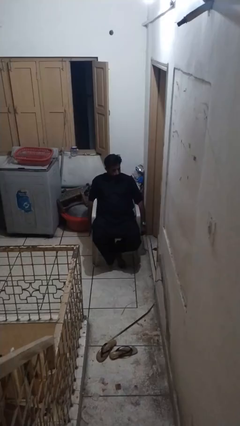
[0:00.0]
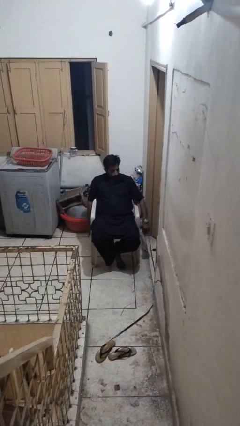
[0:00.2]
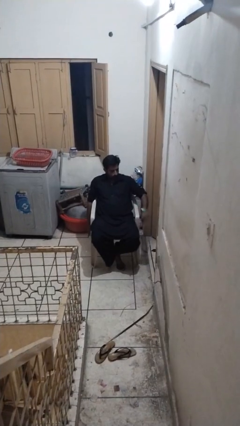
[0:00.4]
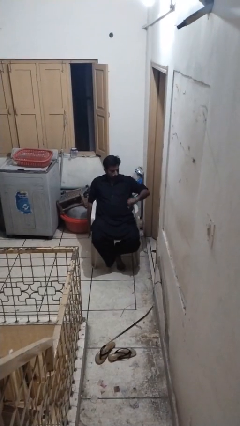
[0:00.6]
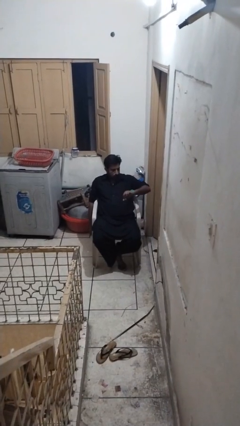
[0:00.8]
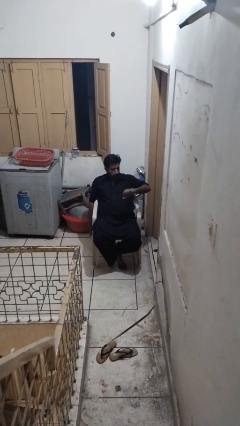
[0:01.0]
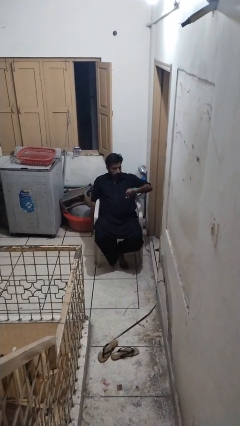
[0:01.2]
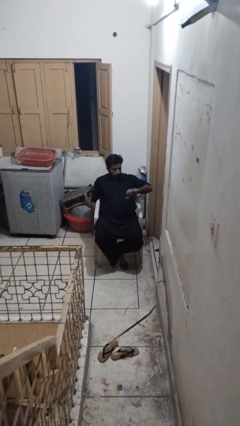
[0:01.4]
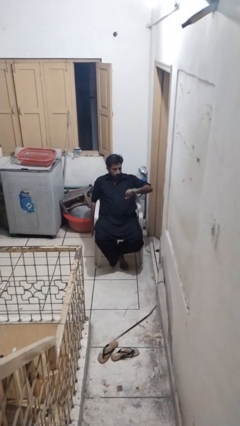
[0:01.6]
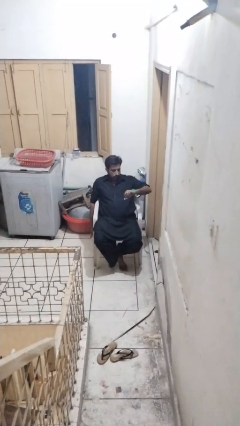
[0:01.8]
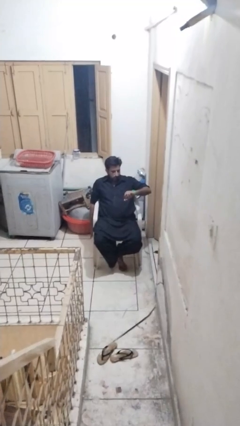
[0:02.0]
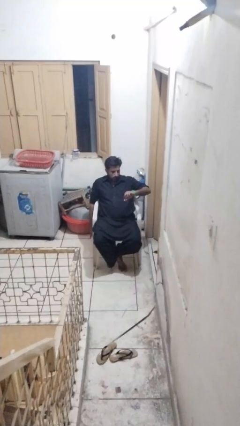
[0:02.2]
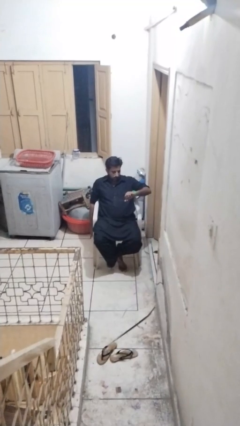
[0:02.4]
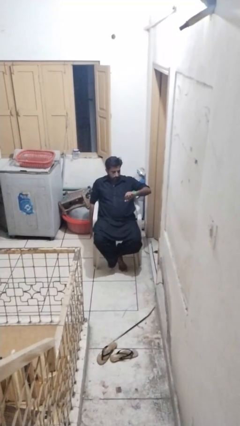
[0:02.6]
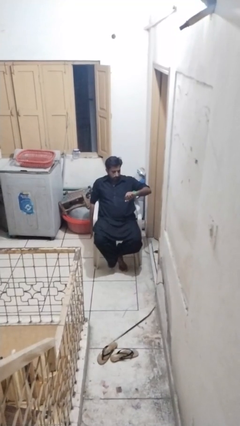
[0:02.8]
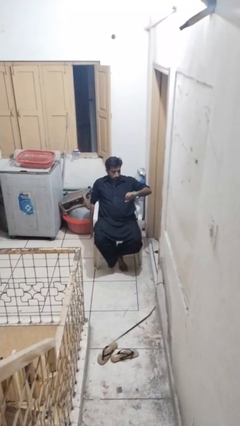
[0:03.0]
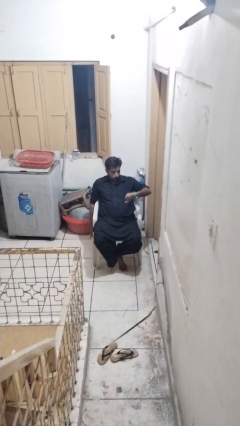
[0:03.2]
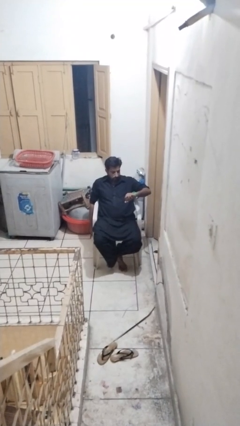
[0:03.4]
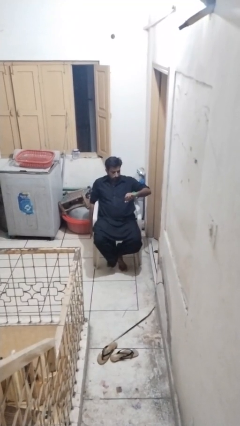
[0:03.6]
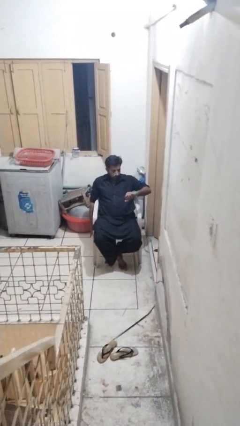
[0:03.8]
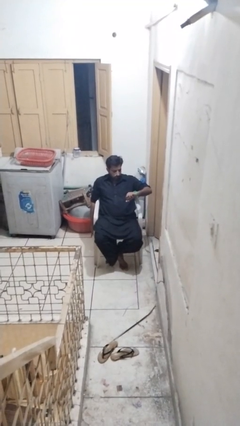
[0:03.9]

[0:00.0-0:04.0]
person looks at wristwatch

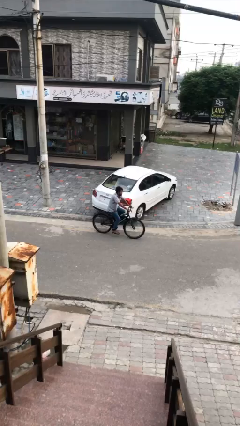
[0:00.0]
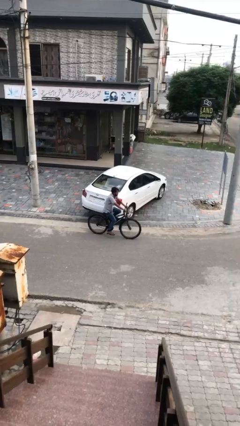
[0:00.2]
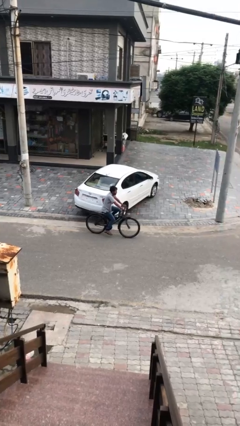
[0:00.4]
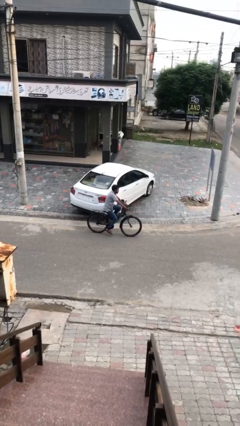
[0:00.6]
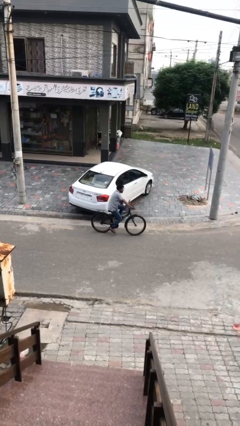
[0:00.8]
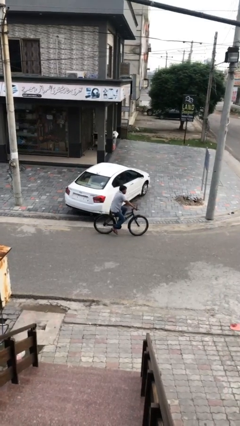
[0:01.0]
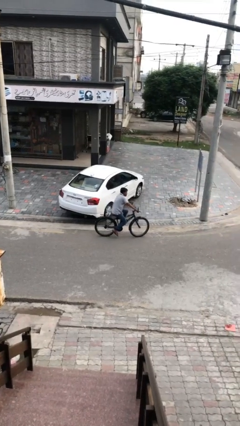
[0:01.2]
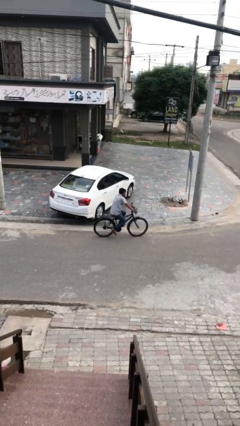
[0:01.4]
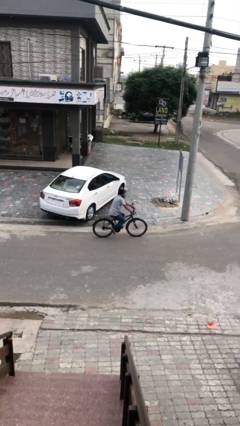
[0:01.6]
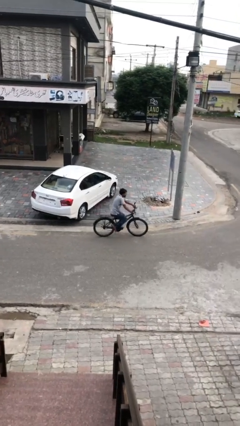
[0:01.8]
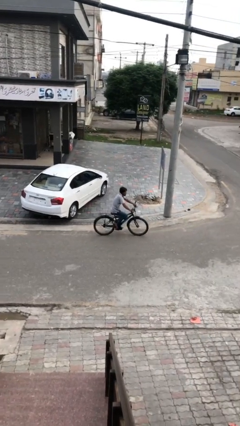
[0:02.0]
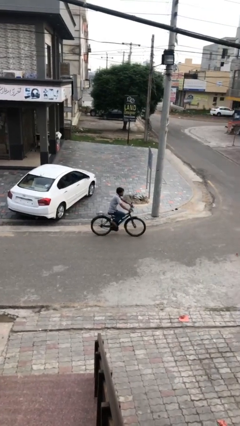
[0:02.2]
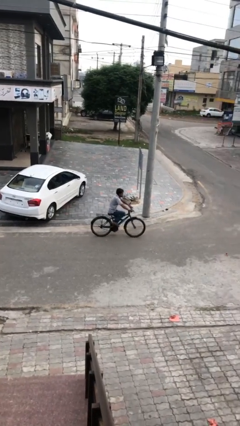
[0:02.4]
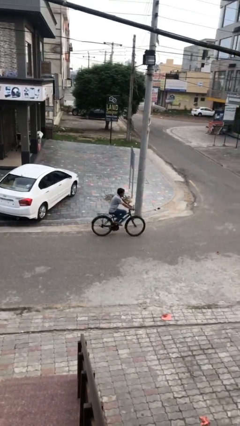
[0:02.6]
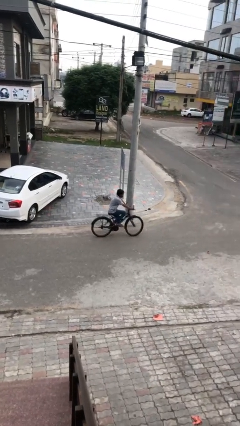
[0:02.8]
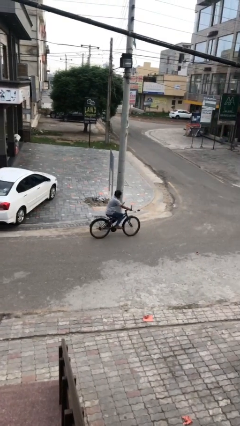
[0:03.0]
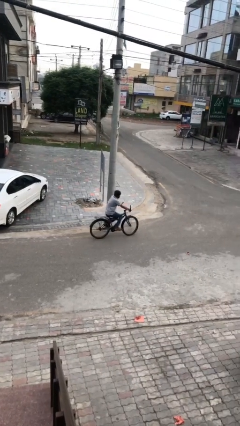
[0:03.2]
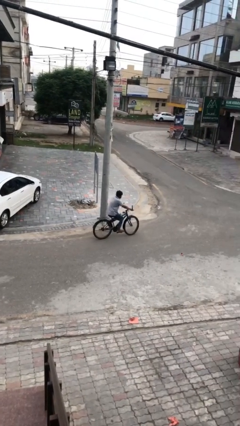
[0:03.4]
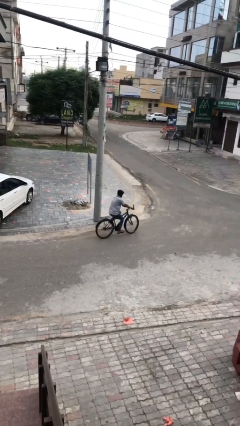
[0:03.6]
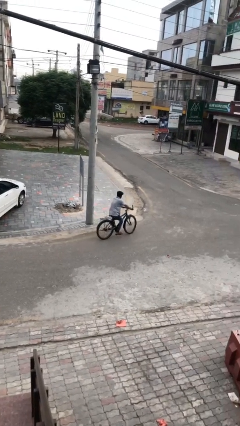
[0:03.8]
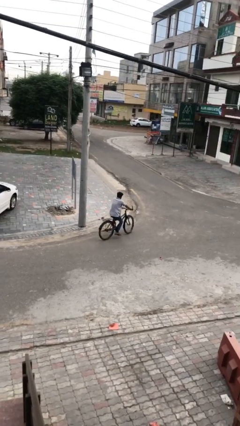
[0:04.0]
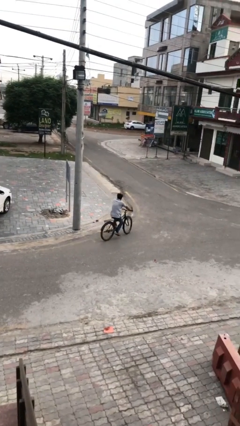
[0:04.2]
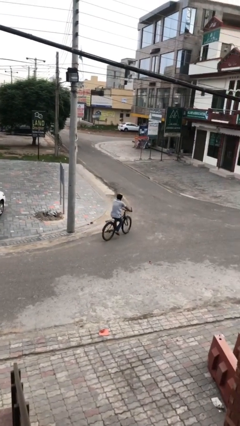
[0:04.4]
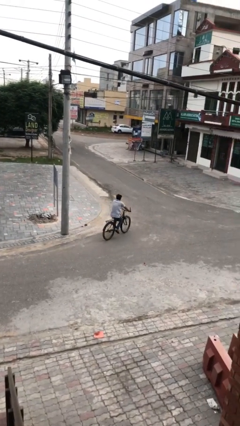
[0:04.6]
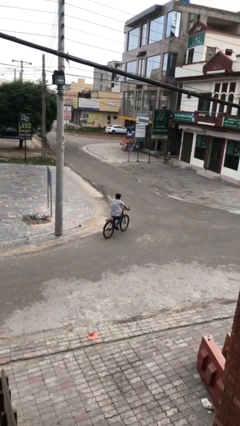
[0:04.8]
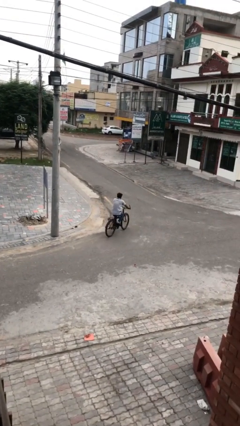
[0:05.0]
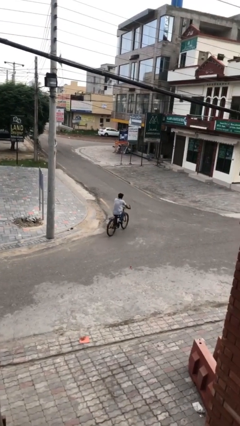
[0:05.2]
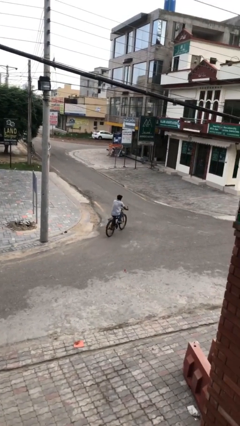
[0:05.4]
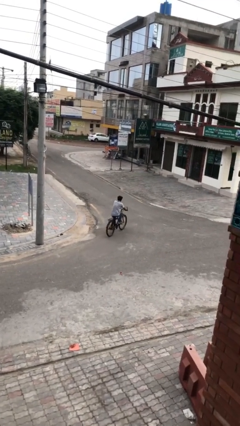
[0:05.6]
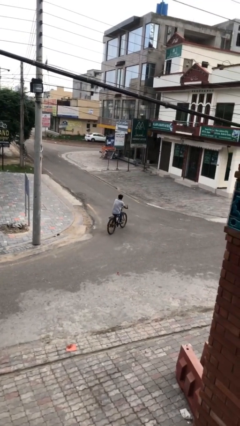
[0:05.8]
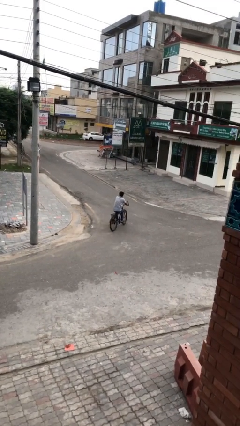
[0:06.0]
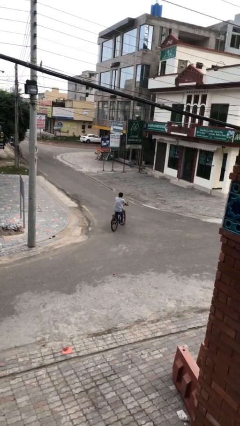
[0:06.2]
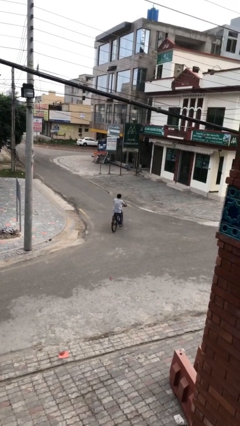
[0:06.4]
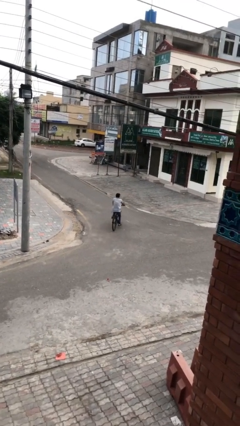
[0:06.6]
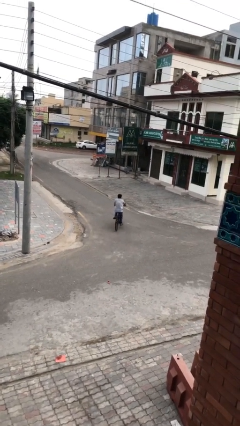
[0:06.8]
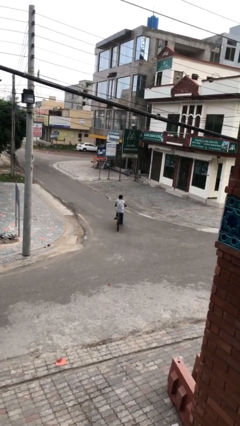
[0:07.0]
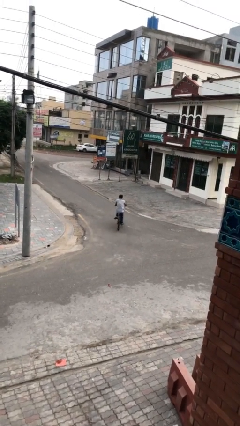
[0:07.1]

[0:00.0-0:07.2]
person rides bicycle

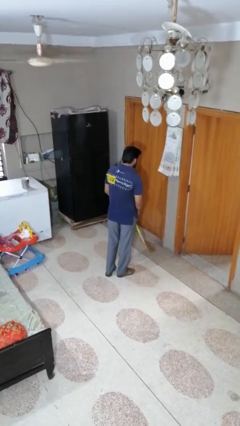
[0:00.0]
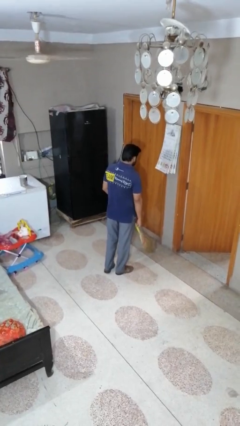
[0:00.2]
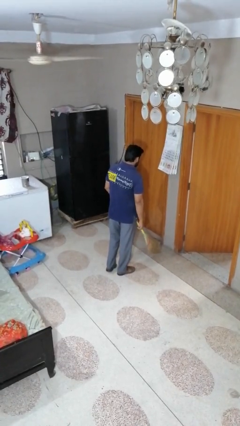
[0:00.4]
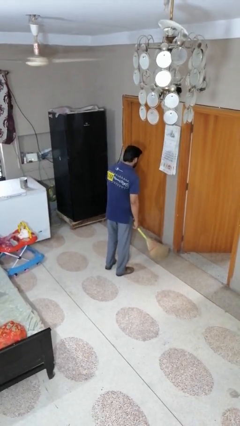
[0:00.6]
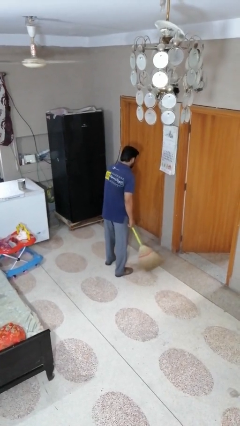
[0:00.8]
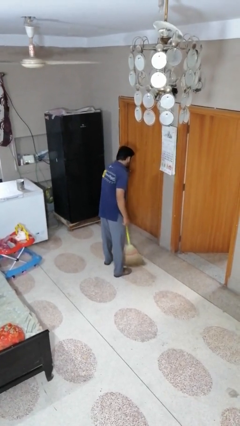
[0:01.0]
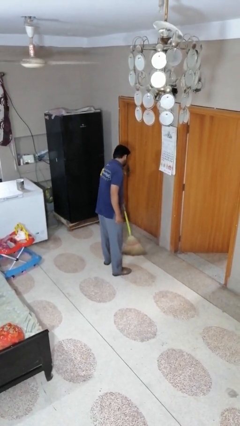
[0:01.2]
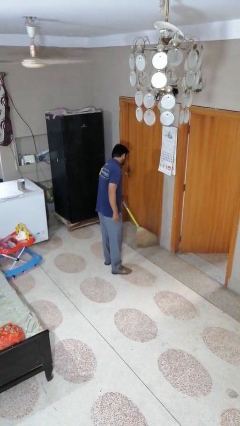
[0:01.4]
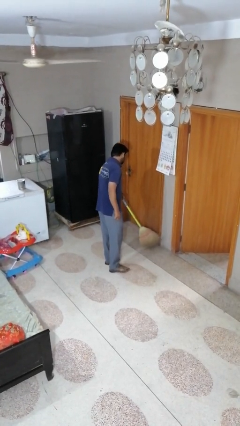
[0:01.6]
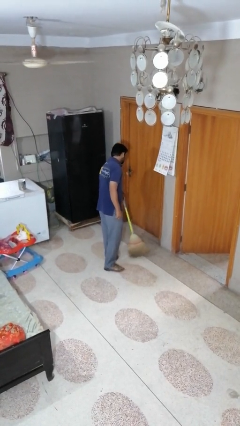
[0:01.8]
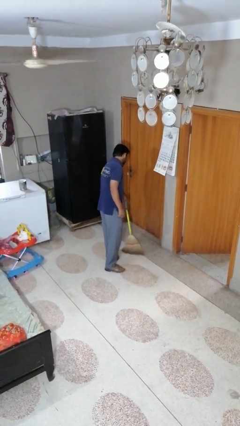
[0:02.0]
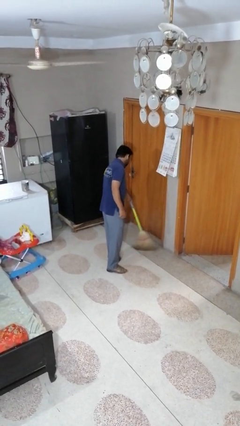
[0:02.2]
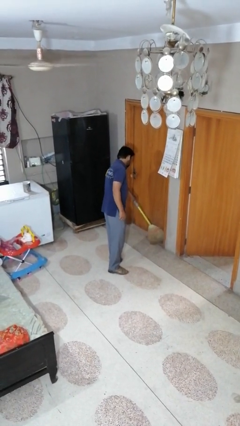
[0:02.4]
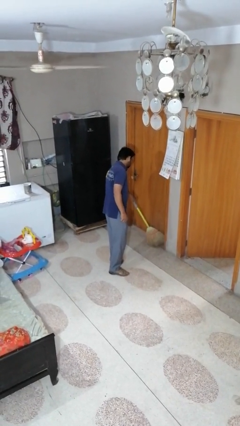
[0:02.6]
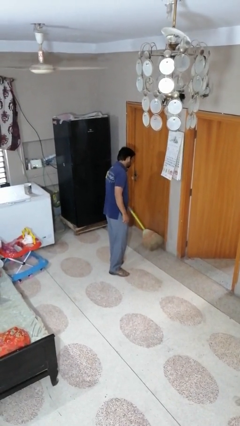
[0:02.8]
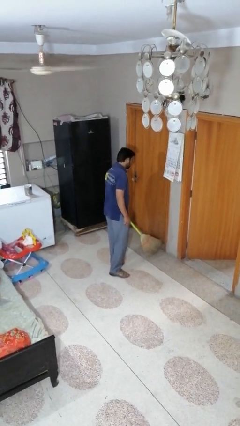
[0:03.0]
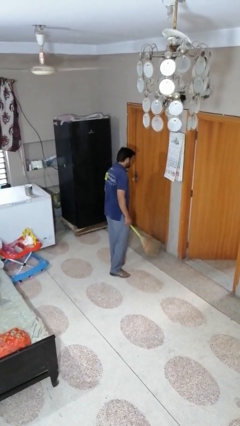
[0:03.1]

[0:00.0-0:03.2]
person sweeps floor

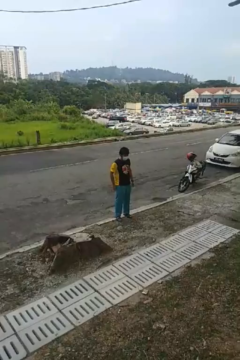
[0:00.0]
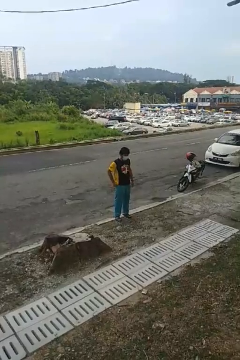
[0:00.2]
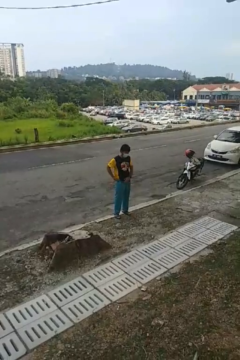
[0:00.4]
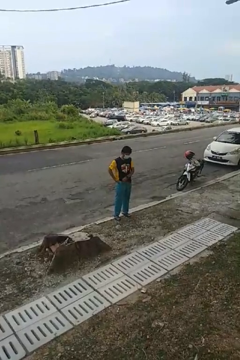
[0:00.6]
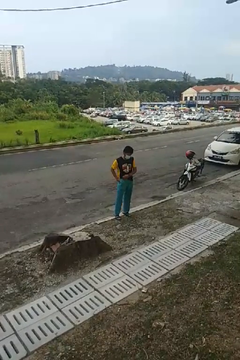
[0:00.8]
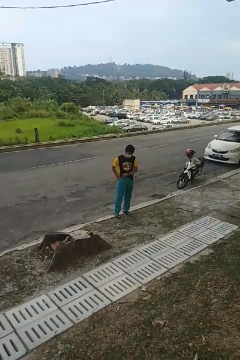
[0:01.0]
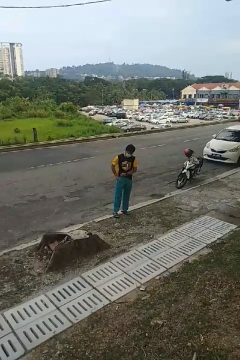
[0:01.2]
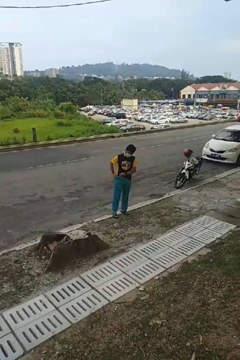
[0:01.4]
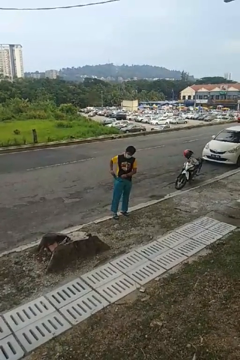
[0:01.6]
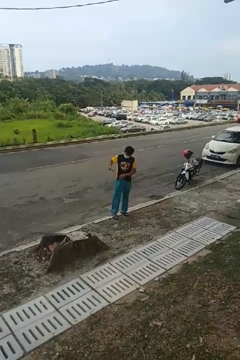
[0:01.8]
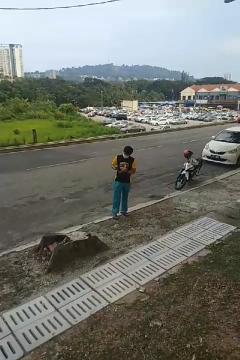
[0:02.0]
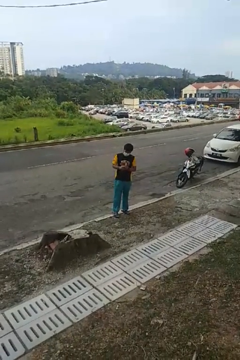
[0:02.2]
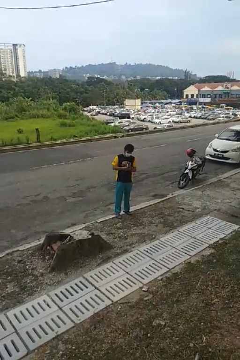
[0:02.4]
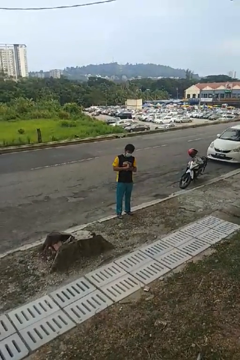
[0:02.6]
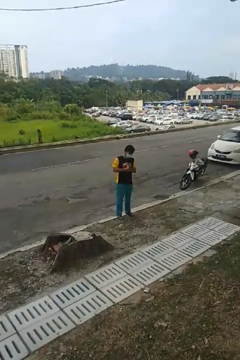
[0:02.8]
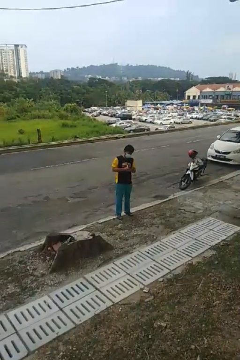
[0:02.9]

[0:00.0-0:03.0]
person takes phone from pocket

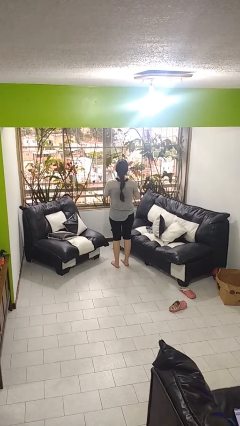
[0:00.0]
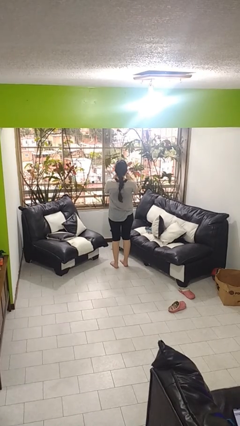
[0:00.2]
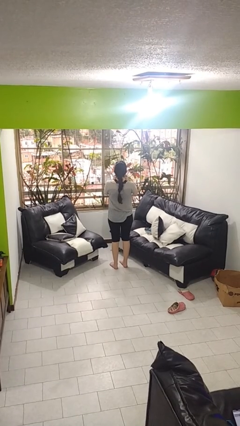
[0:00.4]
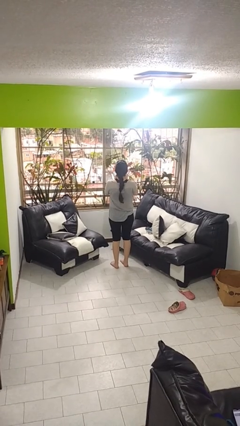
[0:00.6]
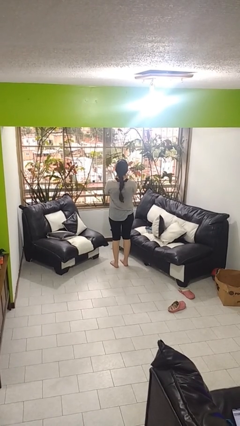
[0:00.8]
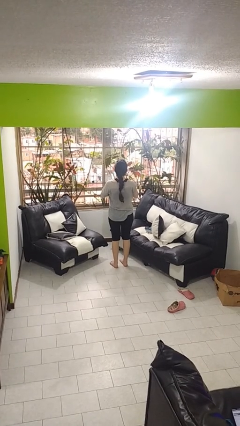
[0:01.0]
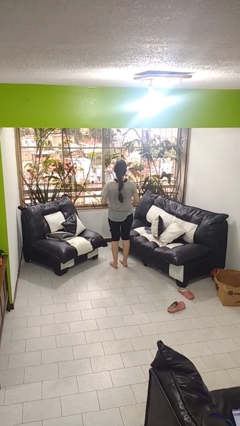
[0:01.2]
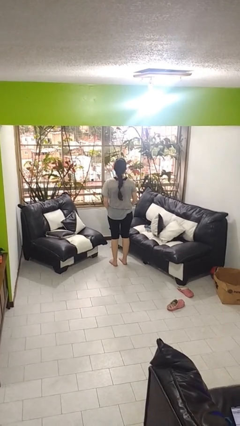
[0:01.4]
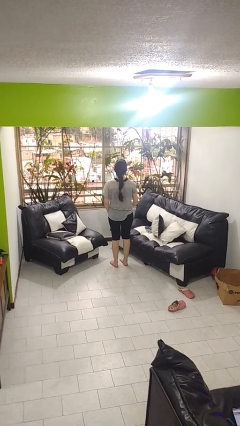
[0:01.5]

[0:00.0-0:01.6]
person wipes mouth with napkin
